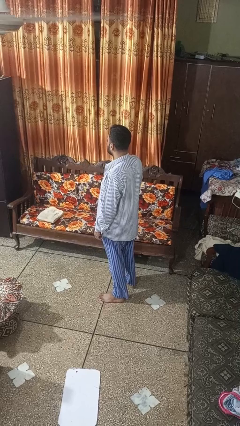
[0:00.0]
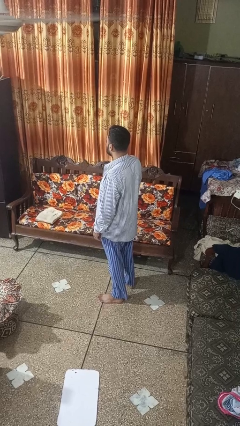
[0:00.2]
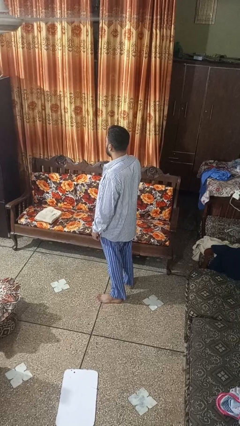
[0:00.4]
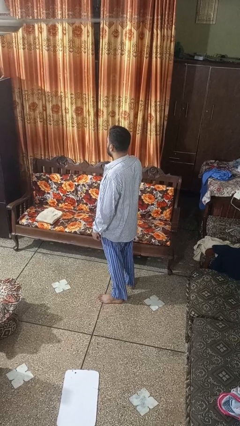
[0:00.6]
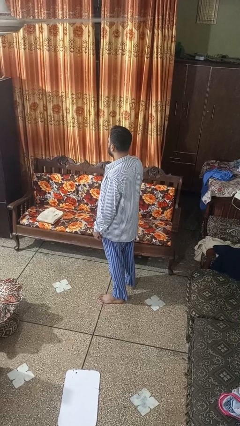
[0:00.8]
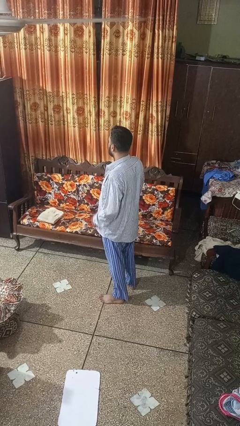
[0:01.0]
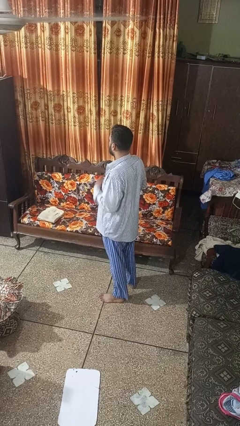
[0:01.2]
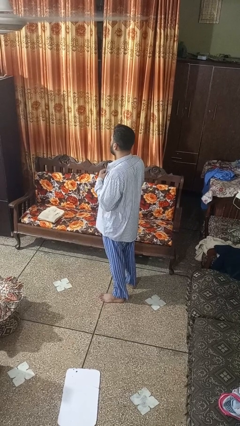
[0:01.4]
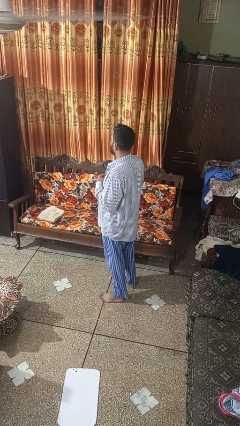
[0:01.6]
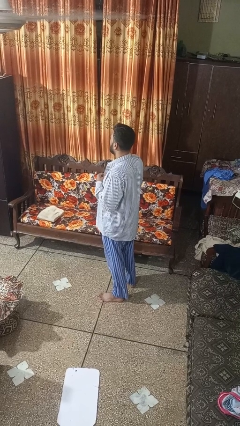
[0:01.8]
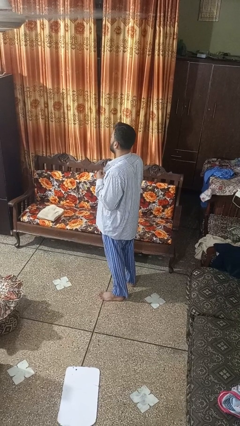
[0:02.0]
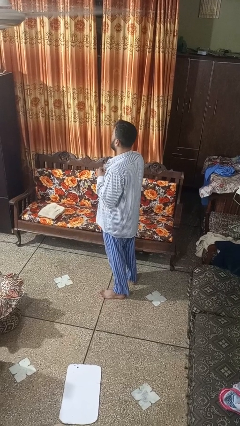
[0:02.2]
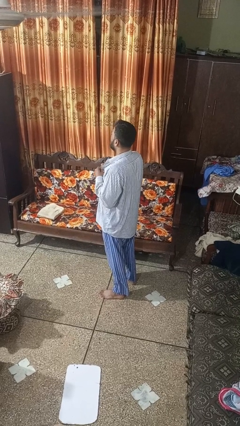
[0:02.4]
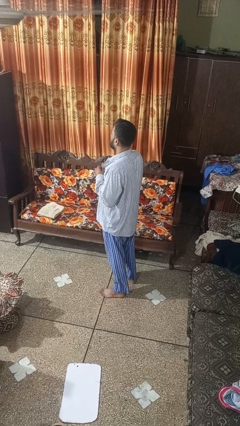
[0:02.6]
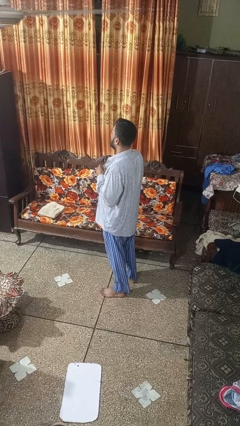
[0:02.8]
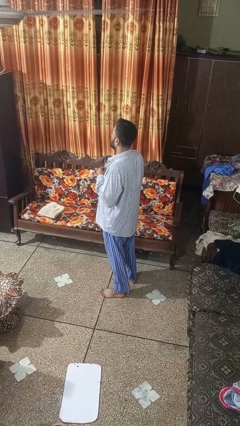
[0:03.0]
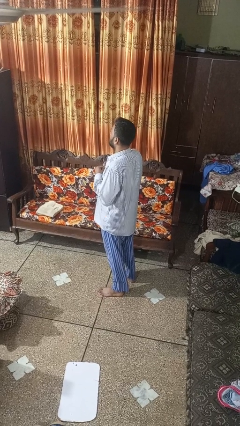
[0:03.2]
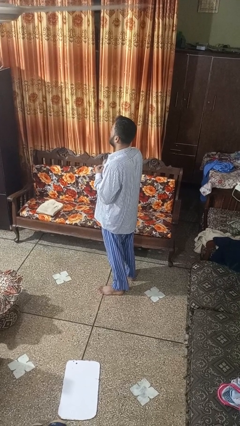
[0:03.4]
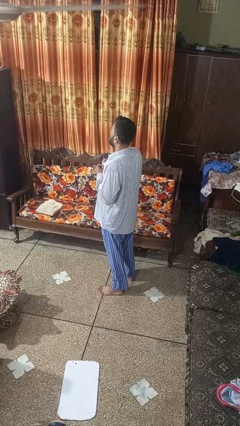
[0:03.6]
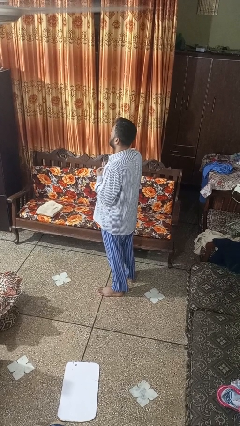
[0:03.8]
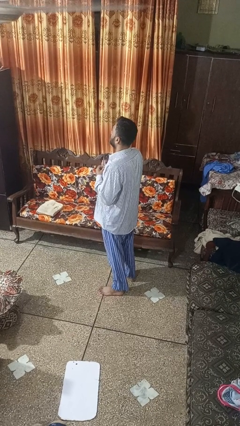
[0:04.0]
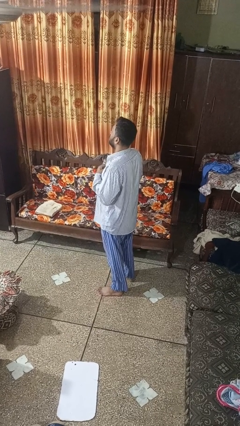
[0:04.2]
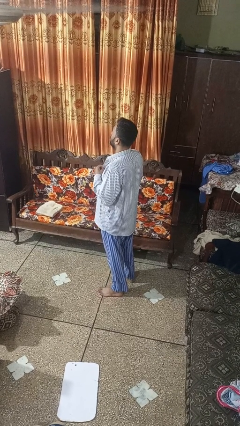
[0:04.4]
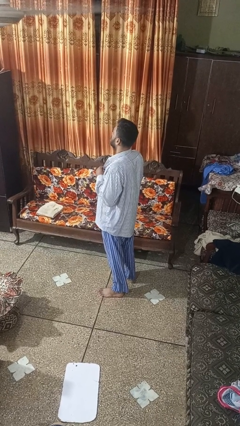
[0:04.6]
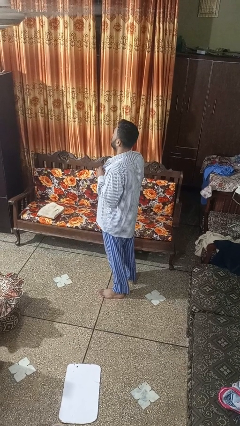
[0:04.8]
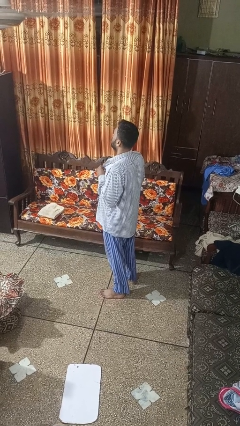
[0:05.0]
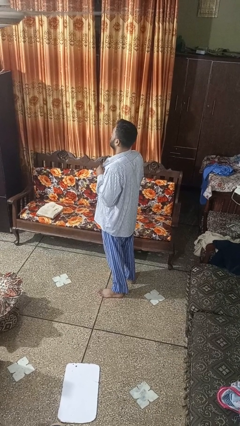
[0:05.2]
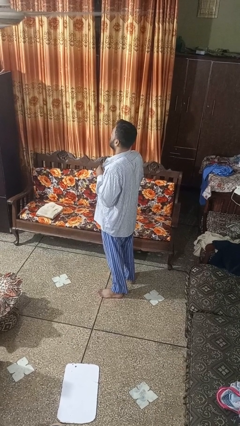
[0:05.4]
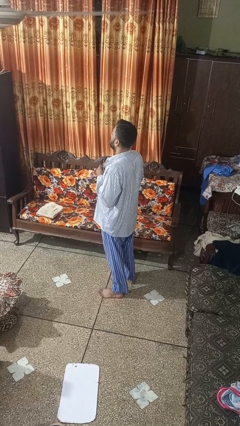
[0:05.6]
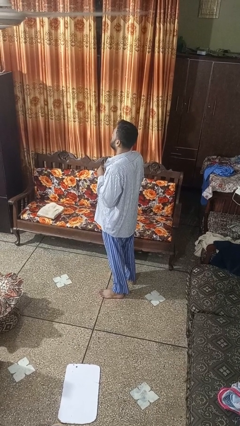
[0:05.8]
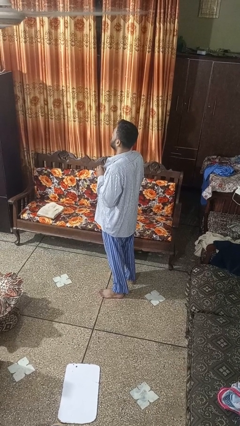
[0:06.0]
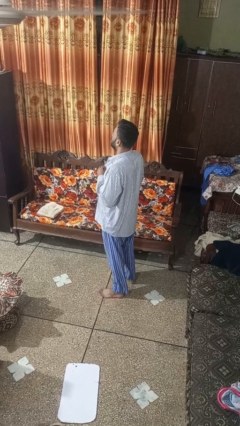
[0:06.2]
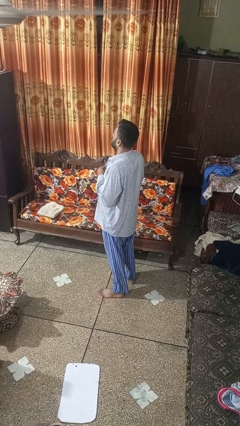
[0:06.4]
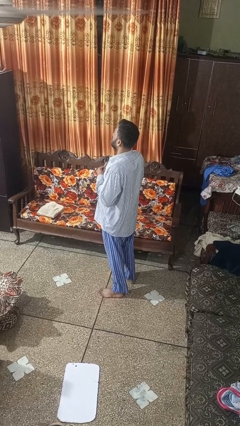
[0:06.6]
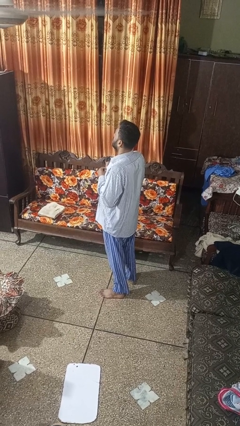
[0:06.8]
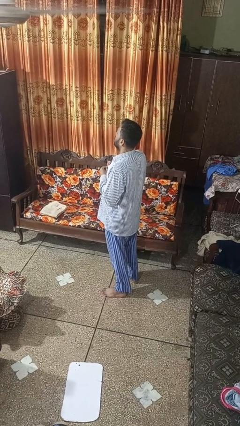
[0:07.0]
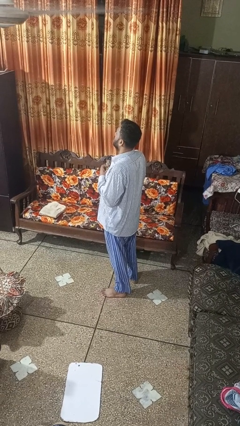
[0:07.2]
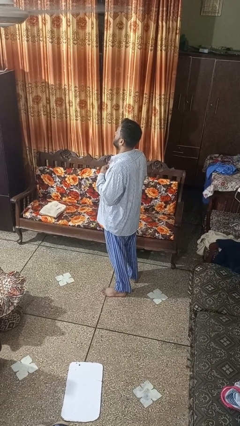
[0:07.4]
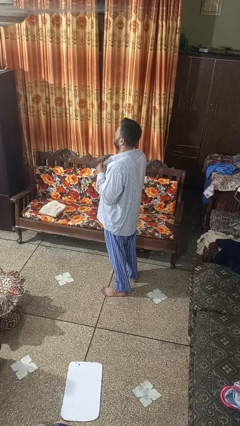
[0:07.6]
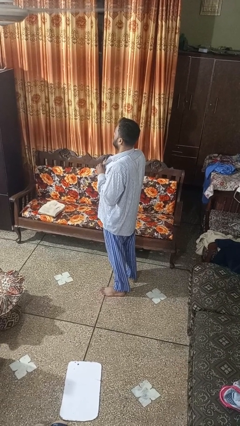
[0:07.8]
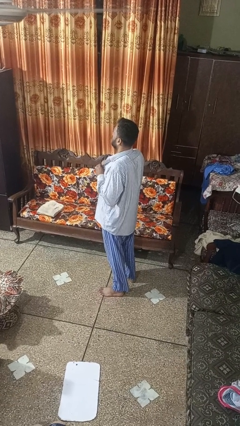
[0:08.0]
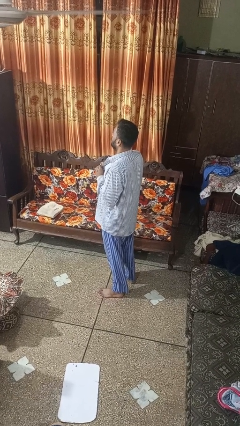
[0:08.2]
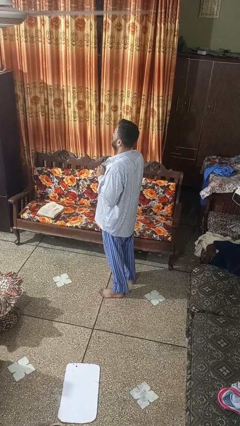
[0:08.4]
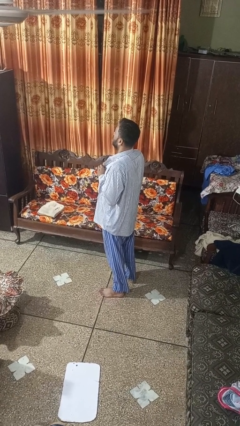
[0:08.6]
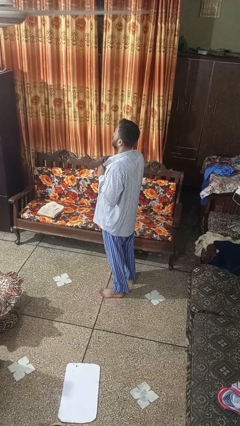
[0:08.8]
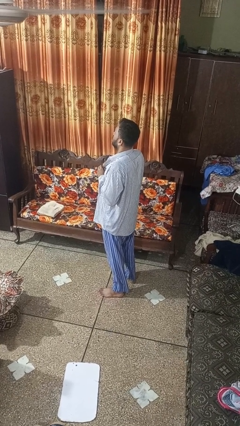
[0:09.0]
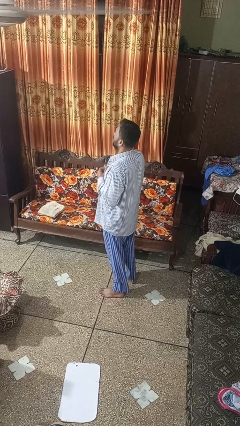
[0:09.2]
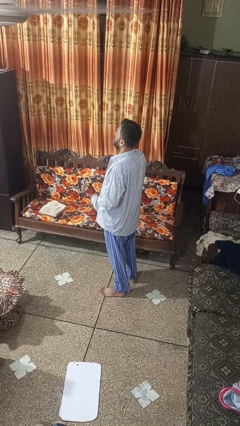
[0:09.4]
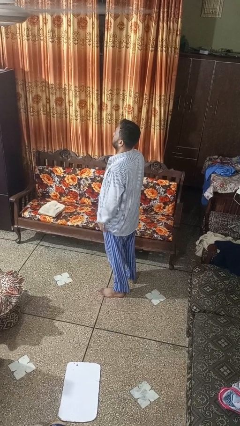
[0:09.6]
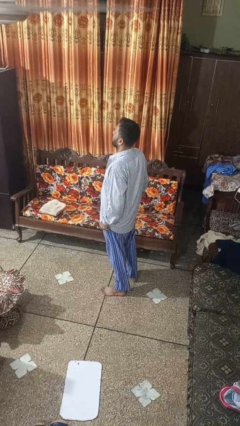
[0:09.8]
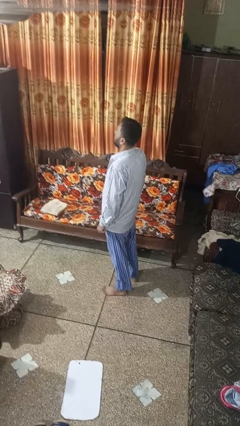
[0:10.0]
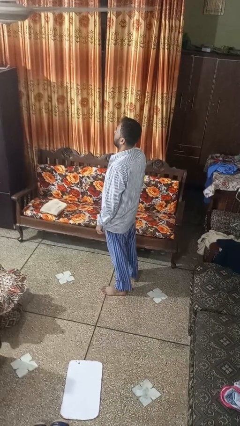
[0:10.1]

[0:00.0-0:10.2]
person unbuttons shirt

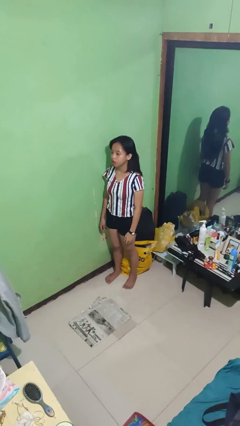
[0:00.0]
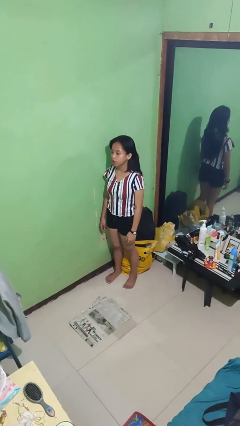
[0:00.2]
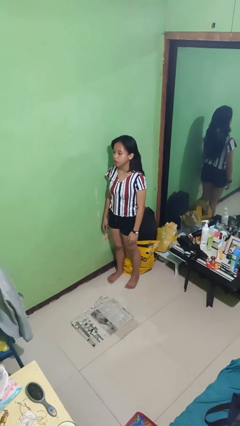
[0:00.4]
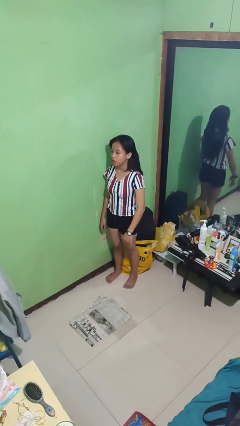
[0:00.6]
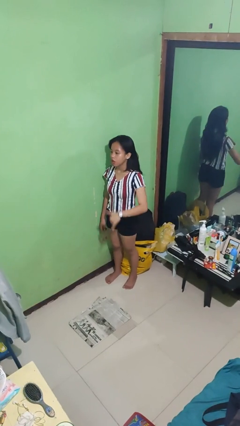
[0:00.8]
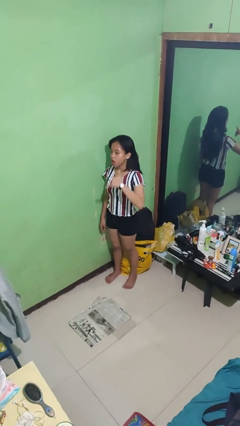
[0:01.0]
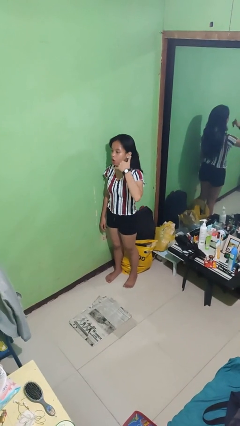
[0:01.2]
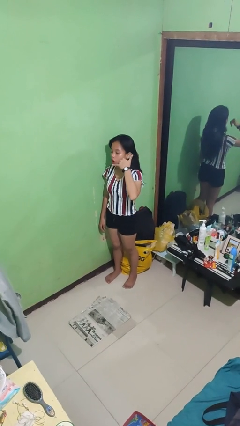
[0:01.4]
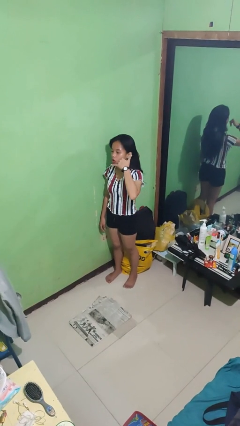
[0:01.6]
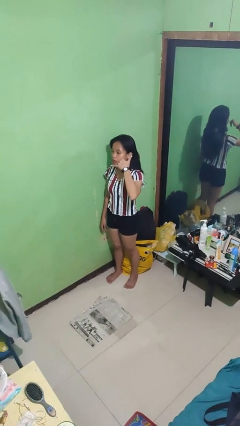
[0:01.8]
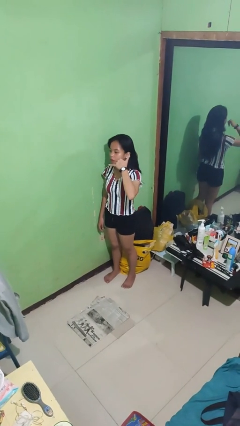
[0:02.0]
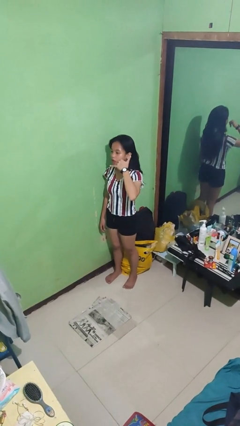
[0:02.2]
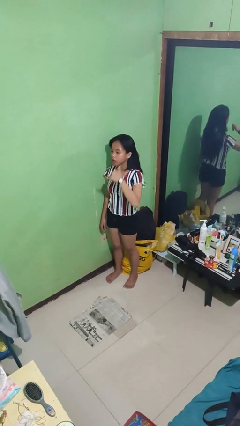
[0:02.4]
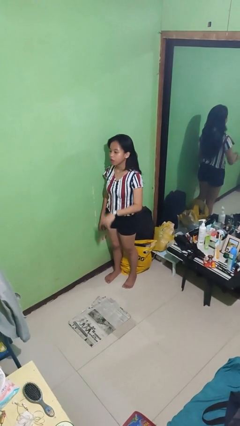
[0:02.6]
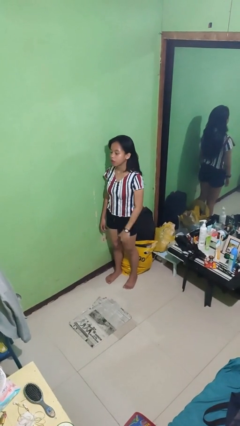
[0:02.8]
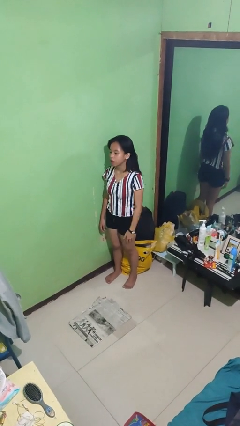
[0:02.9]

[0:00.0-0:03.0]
person gestures call me

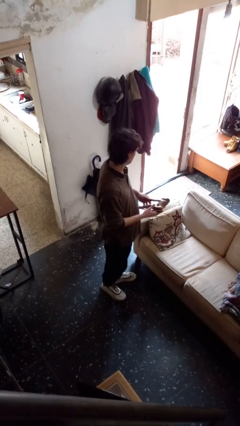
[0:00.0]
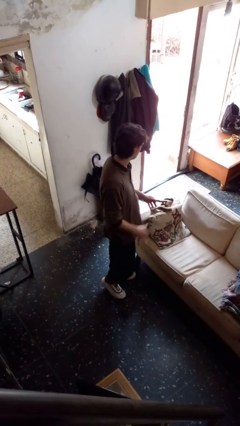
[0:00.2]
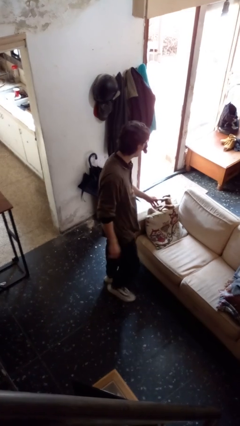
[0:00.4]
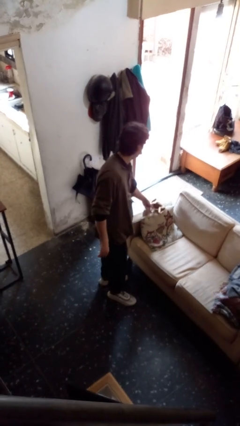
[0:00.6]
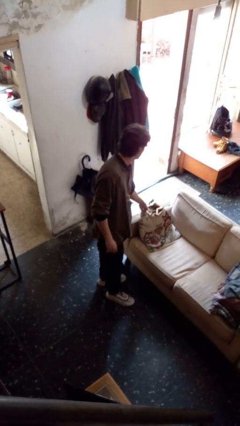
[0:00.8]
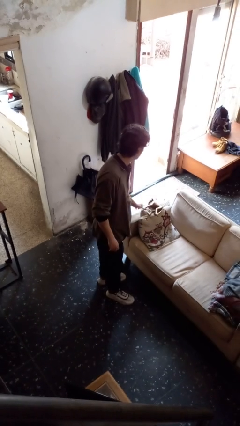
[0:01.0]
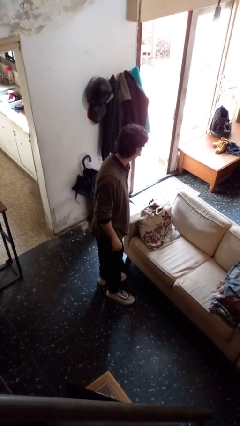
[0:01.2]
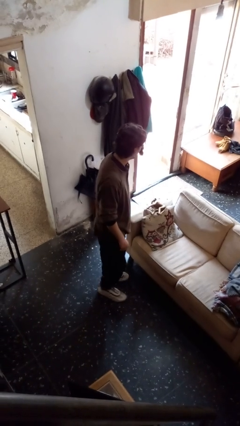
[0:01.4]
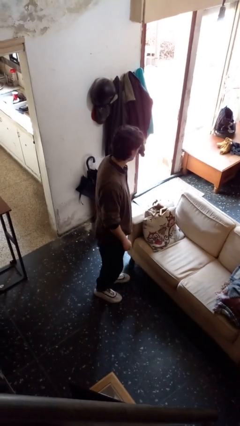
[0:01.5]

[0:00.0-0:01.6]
person puts down object on couch

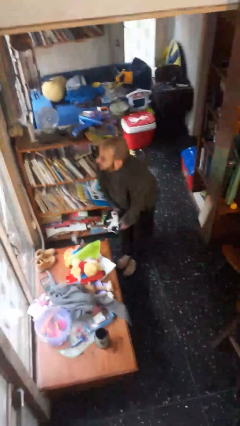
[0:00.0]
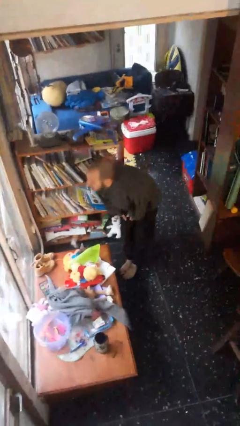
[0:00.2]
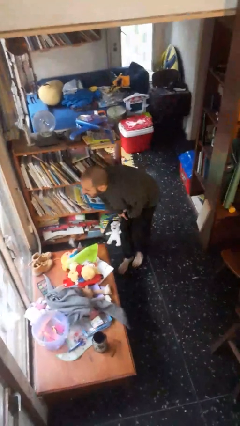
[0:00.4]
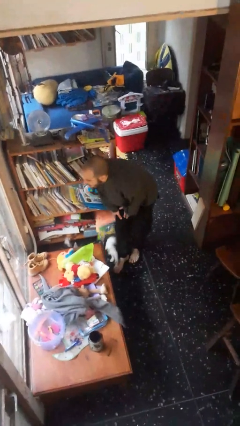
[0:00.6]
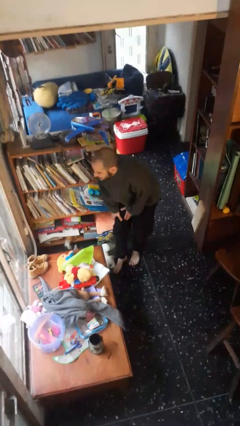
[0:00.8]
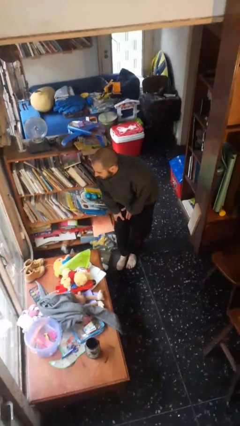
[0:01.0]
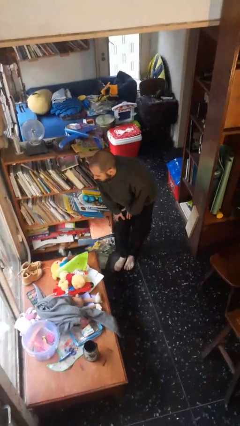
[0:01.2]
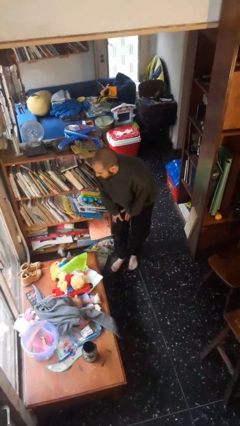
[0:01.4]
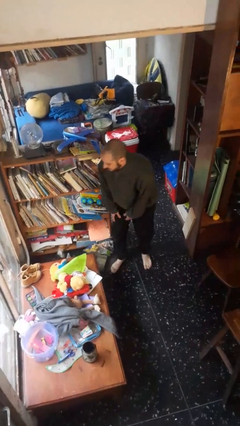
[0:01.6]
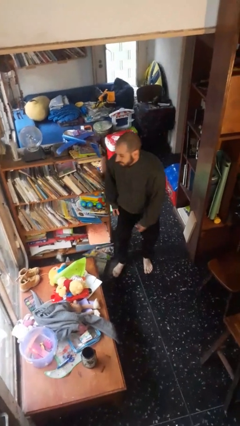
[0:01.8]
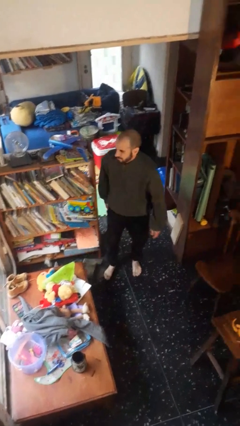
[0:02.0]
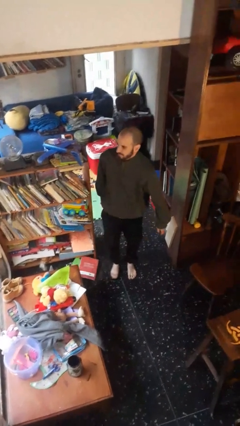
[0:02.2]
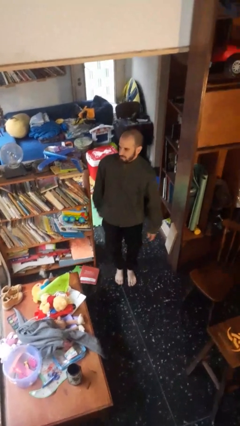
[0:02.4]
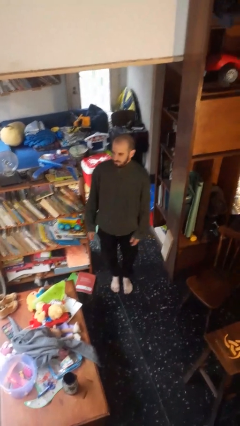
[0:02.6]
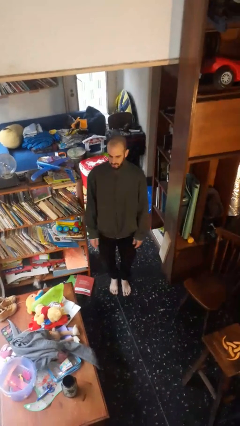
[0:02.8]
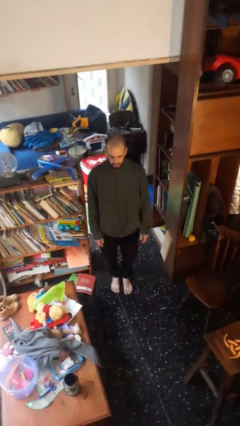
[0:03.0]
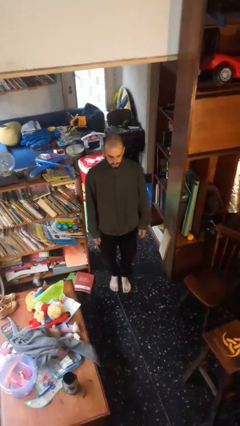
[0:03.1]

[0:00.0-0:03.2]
person stubs toe
